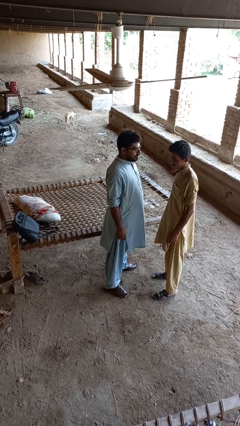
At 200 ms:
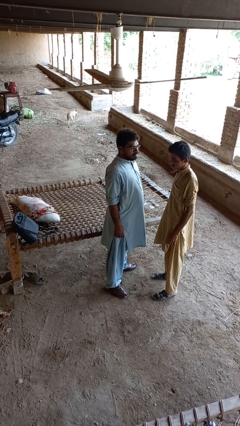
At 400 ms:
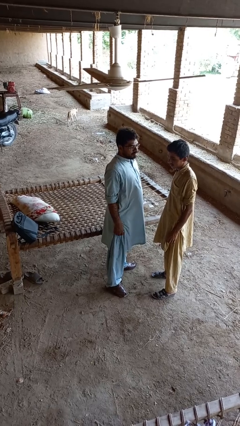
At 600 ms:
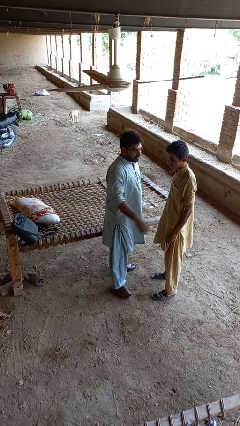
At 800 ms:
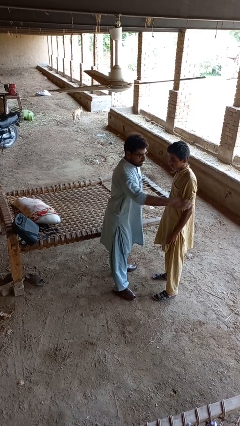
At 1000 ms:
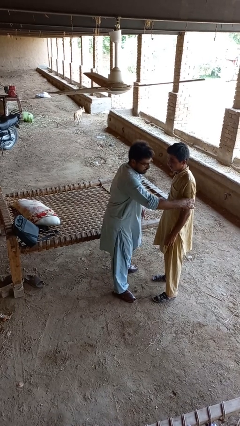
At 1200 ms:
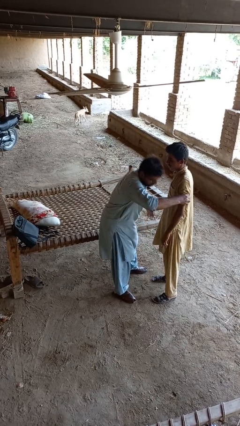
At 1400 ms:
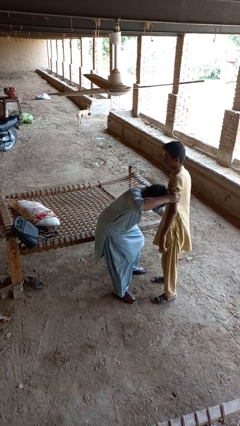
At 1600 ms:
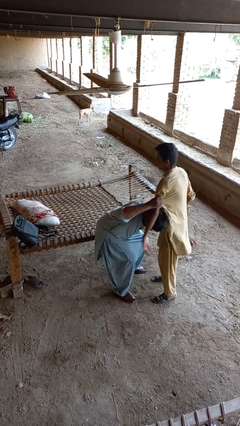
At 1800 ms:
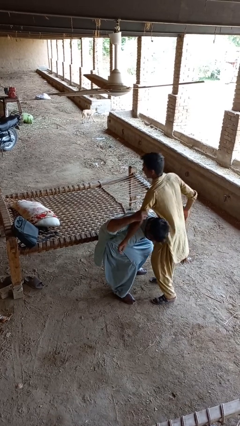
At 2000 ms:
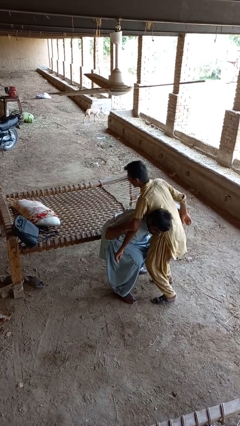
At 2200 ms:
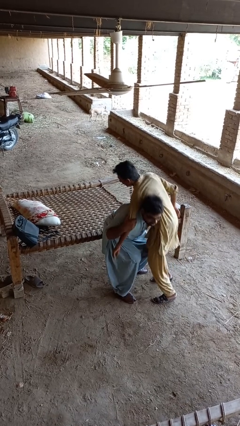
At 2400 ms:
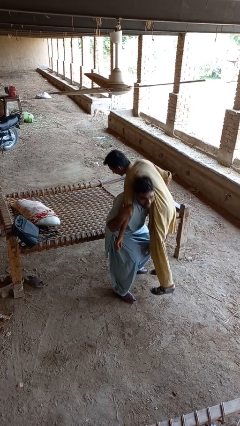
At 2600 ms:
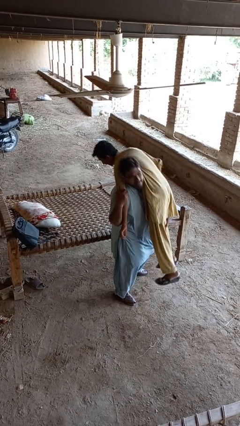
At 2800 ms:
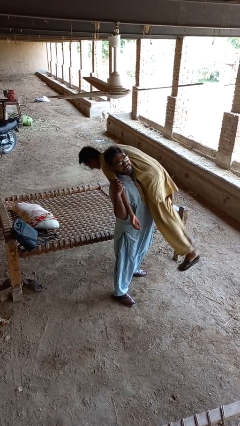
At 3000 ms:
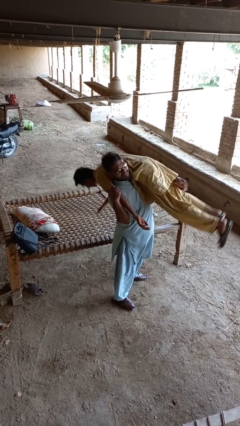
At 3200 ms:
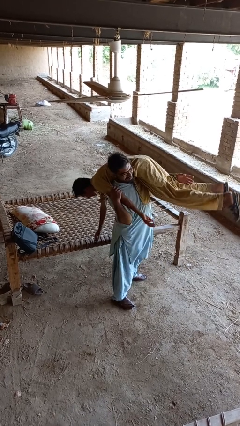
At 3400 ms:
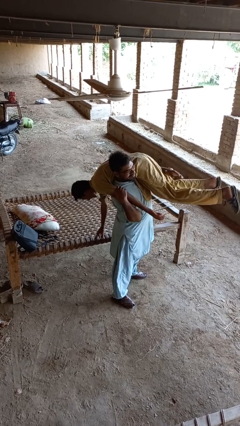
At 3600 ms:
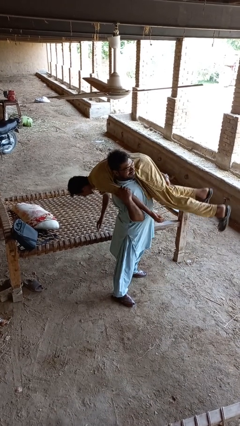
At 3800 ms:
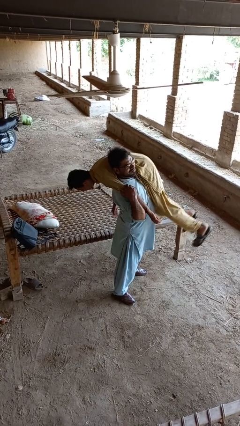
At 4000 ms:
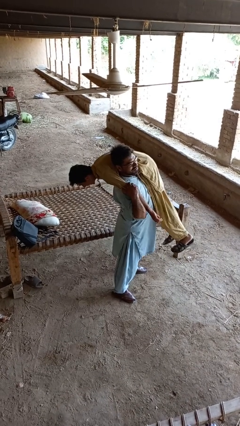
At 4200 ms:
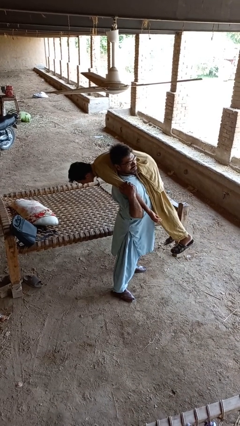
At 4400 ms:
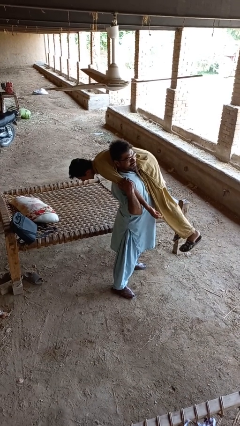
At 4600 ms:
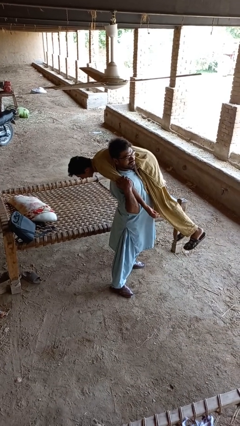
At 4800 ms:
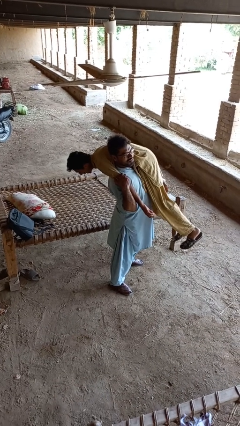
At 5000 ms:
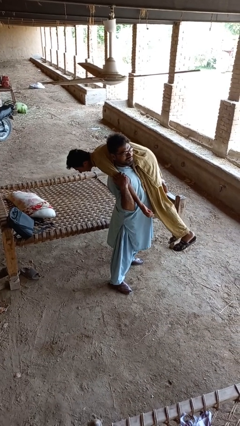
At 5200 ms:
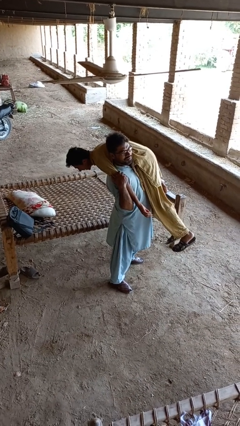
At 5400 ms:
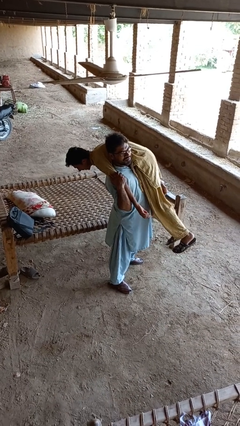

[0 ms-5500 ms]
person carries person over shoulder

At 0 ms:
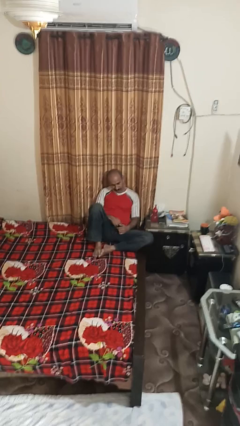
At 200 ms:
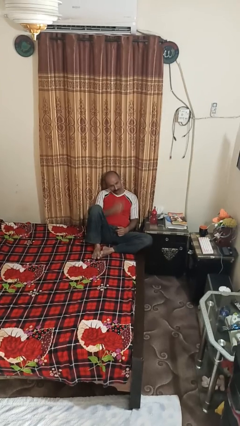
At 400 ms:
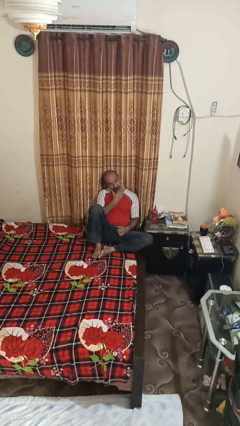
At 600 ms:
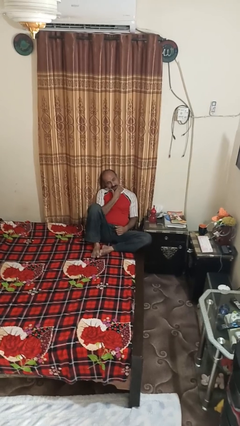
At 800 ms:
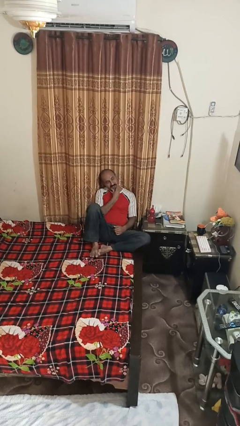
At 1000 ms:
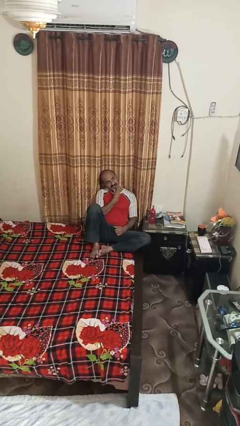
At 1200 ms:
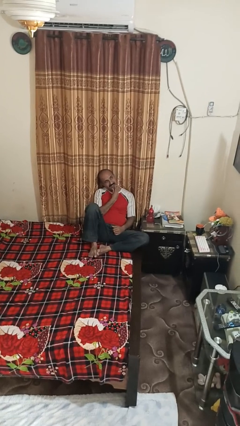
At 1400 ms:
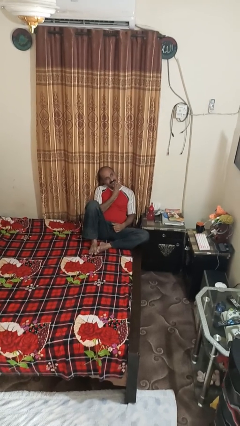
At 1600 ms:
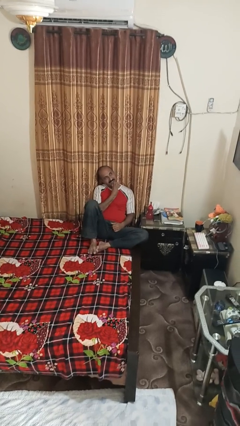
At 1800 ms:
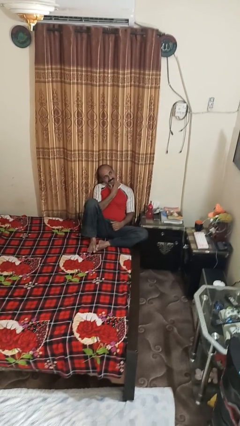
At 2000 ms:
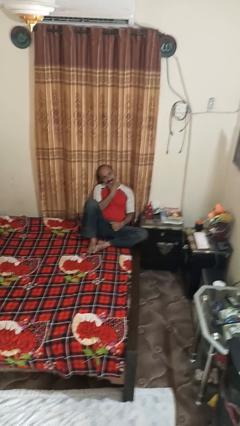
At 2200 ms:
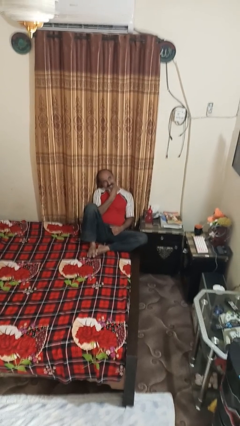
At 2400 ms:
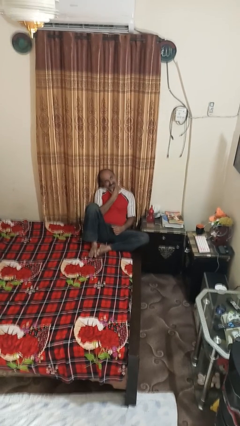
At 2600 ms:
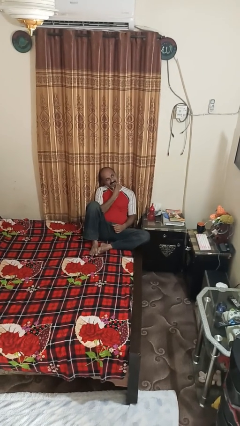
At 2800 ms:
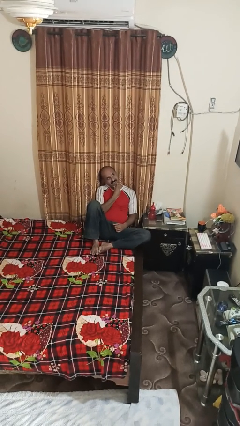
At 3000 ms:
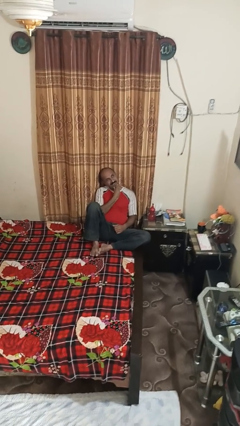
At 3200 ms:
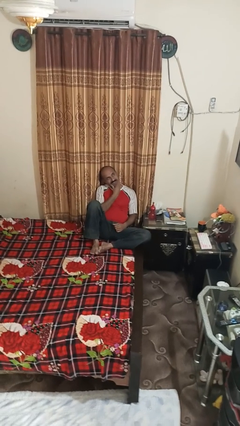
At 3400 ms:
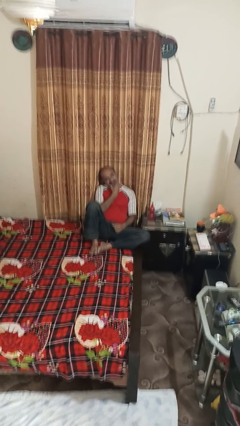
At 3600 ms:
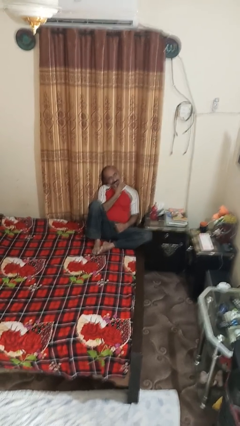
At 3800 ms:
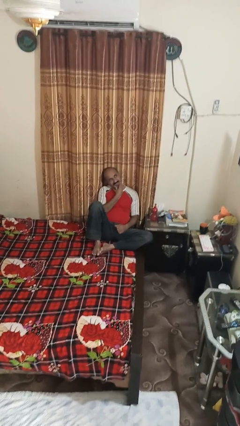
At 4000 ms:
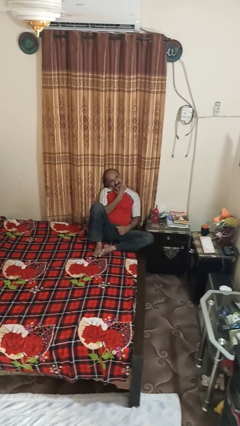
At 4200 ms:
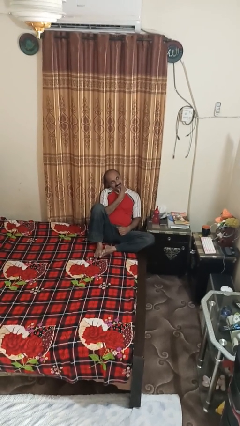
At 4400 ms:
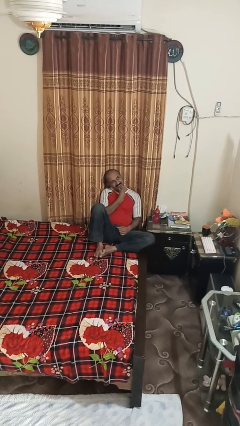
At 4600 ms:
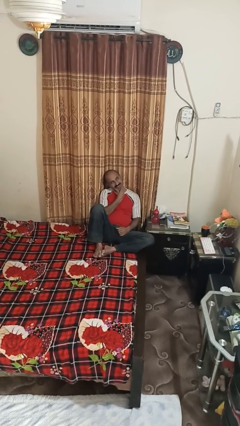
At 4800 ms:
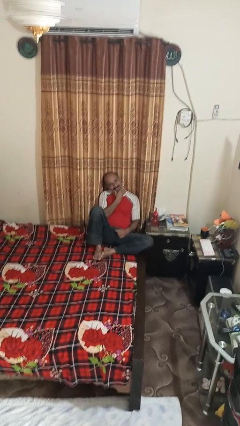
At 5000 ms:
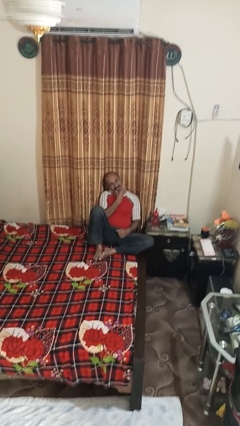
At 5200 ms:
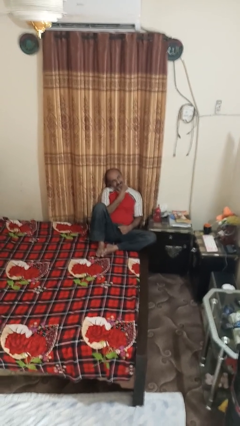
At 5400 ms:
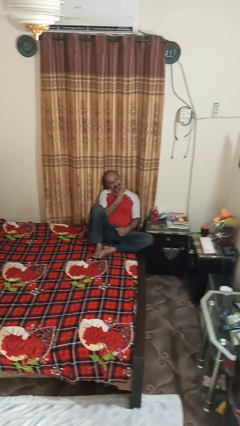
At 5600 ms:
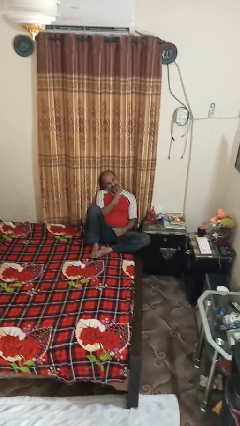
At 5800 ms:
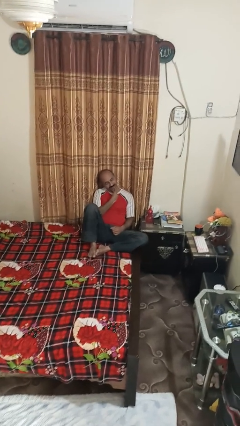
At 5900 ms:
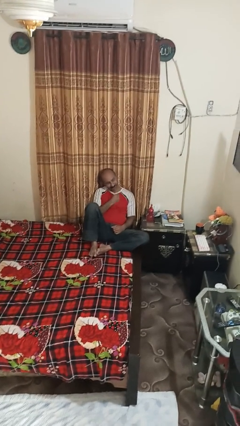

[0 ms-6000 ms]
person strokes chin

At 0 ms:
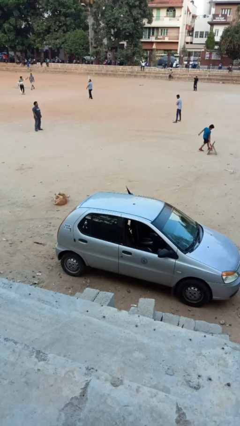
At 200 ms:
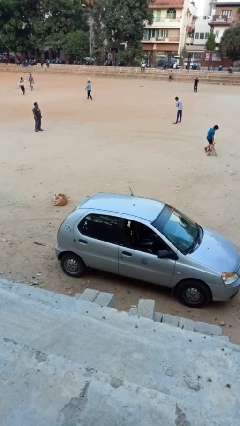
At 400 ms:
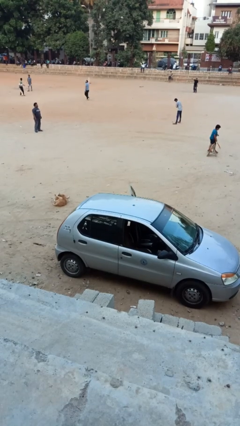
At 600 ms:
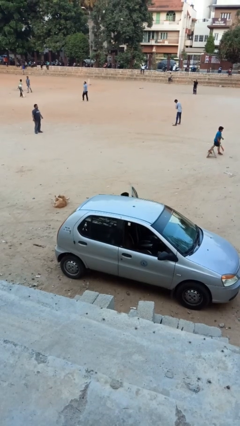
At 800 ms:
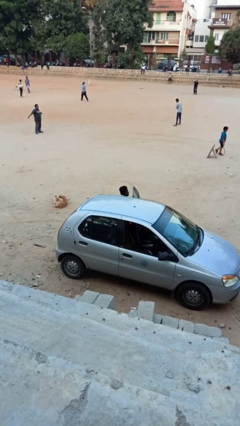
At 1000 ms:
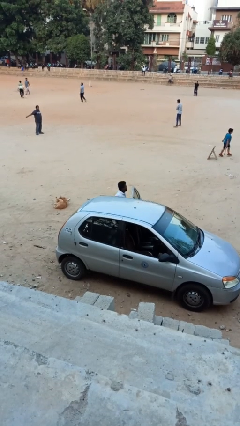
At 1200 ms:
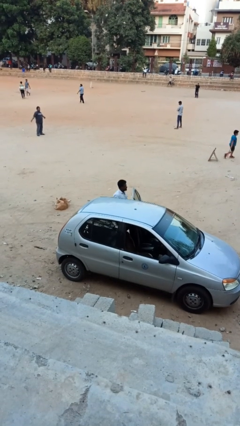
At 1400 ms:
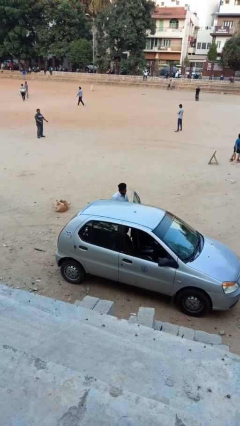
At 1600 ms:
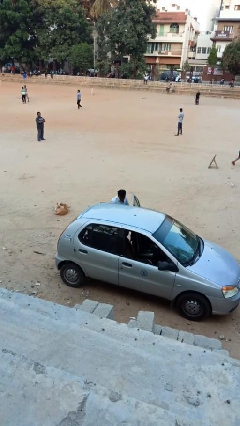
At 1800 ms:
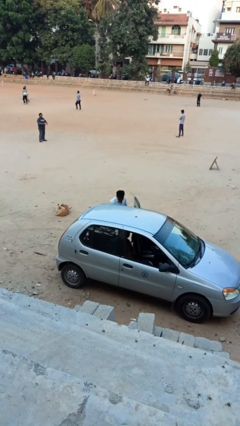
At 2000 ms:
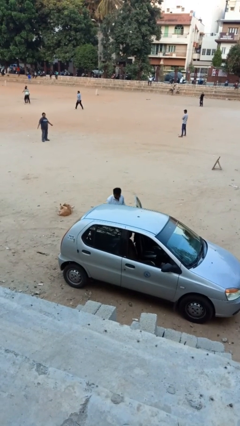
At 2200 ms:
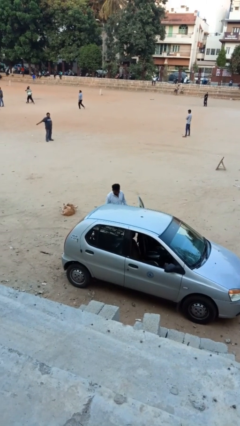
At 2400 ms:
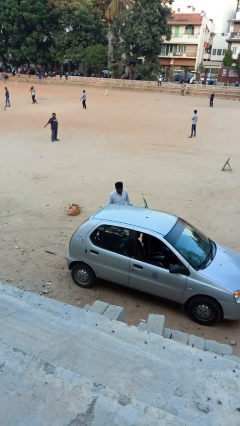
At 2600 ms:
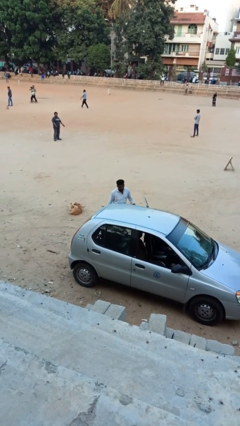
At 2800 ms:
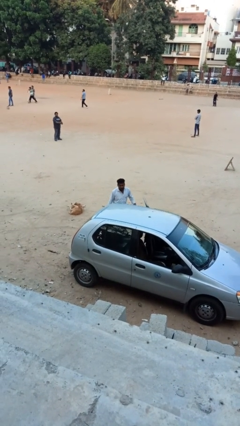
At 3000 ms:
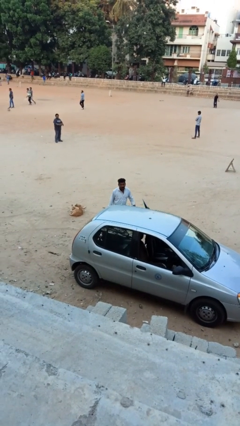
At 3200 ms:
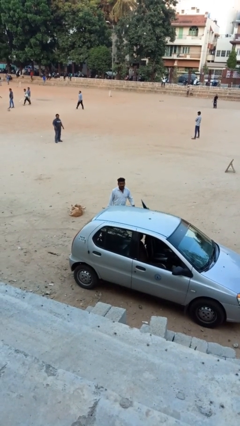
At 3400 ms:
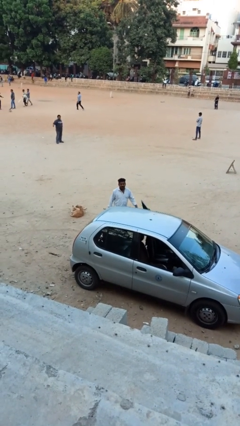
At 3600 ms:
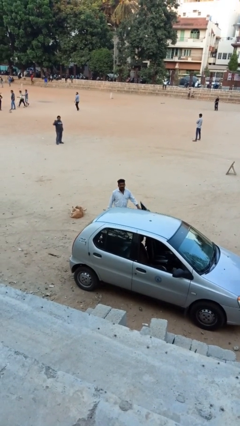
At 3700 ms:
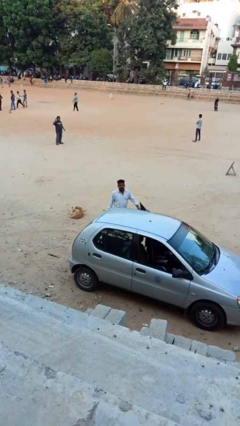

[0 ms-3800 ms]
person exits car

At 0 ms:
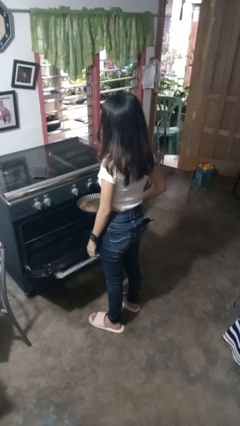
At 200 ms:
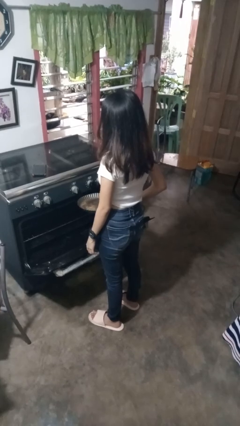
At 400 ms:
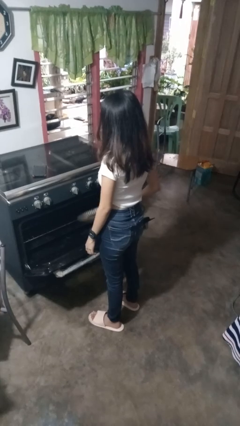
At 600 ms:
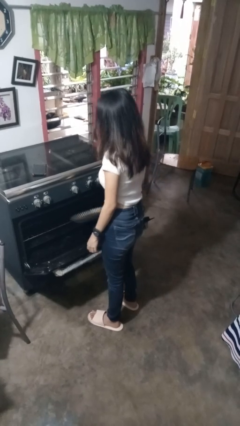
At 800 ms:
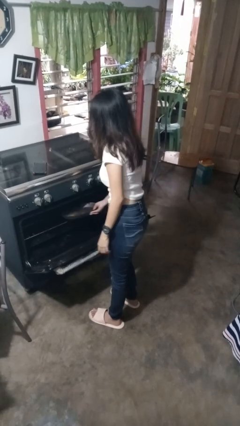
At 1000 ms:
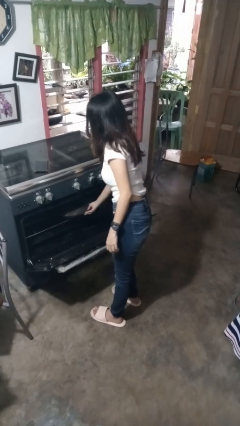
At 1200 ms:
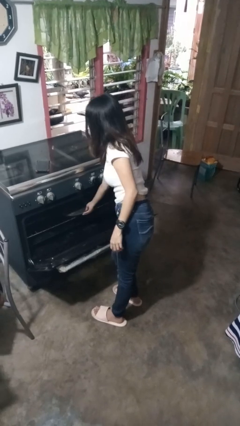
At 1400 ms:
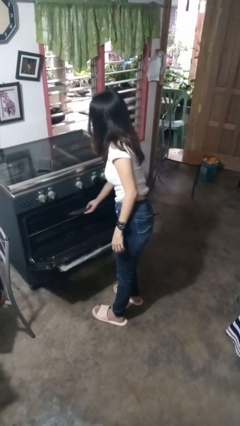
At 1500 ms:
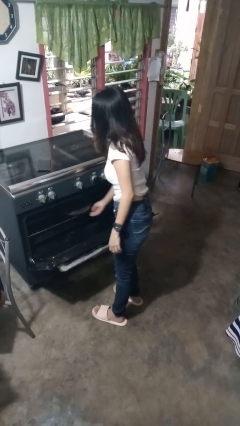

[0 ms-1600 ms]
person puts object into oven

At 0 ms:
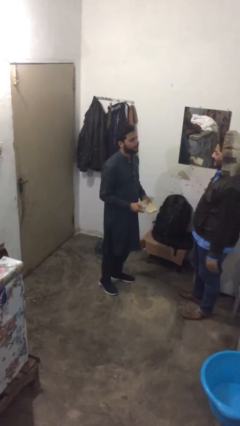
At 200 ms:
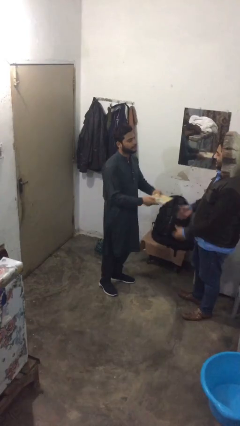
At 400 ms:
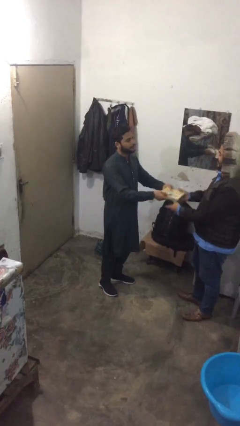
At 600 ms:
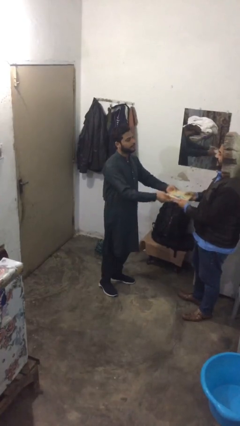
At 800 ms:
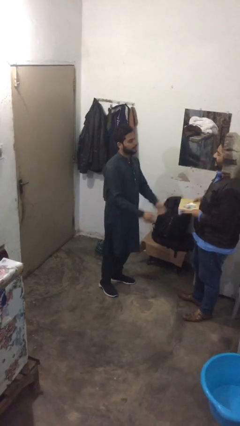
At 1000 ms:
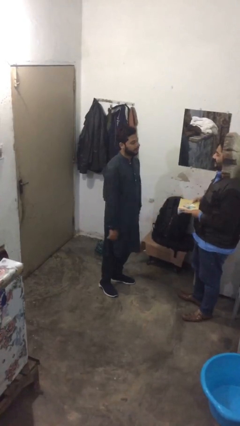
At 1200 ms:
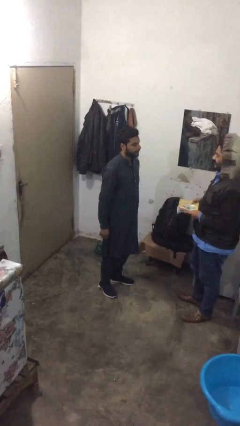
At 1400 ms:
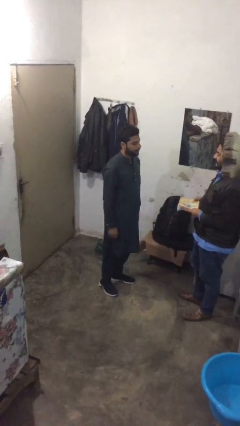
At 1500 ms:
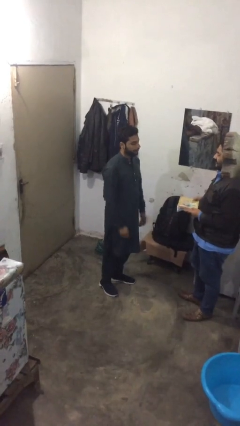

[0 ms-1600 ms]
person transfers object to person
